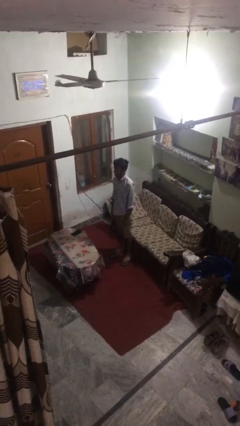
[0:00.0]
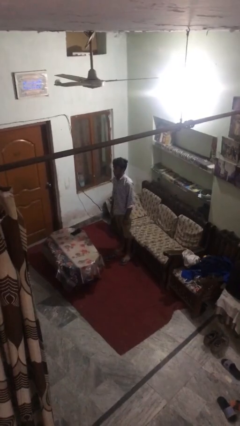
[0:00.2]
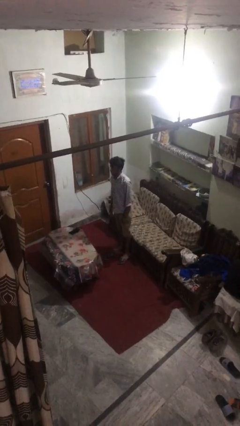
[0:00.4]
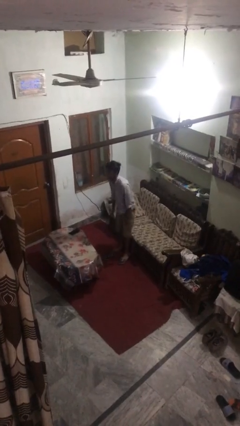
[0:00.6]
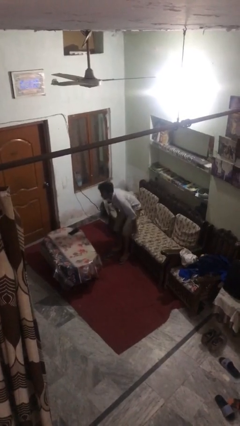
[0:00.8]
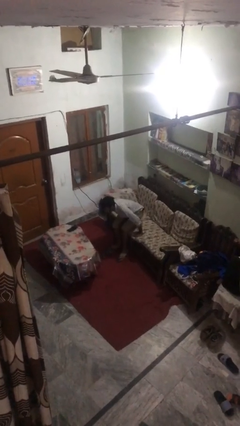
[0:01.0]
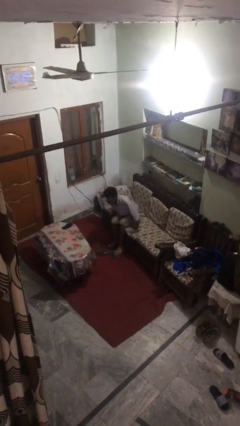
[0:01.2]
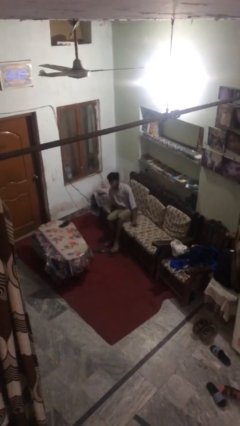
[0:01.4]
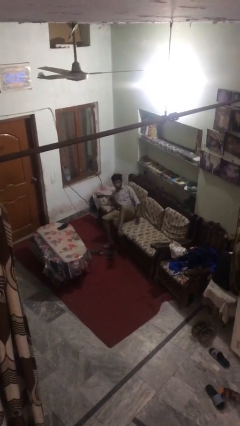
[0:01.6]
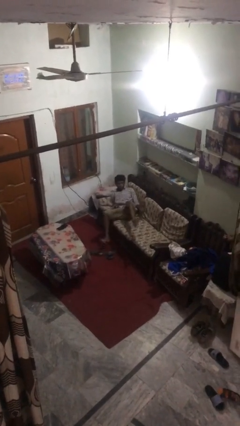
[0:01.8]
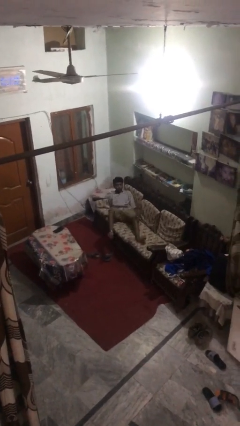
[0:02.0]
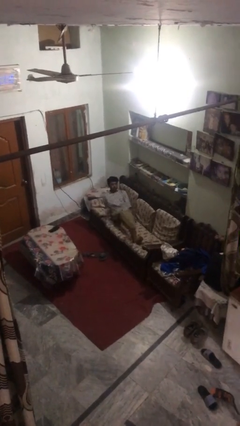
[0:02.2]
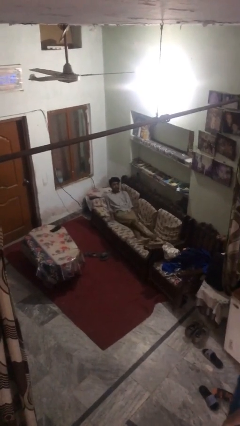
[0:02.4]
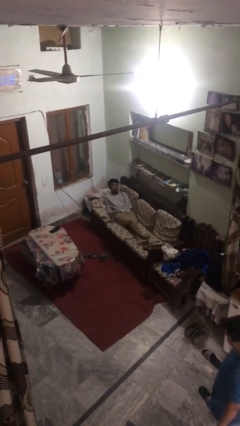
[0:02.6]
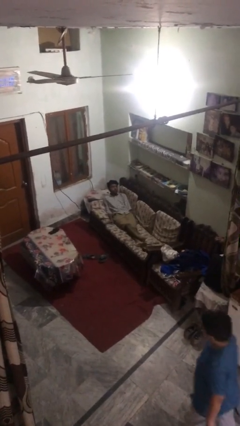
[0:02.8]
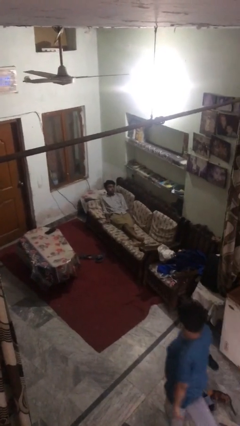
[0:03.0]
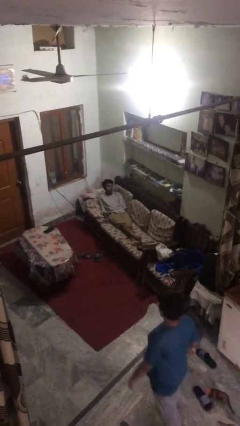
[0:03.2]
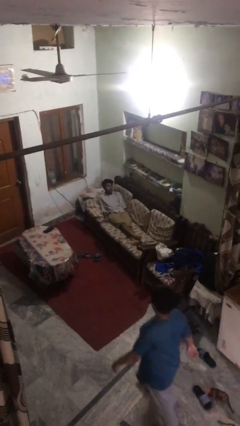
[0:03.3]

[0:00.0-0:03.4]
person lies down on couch

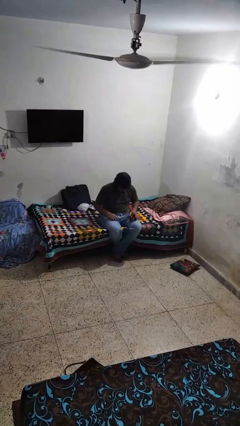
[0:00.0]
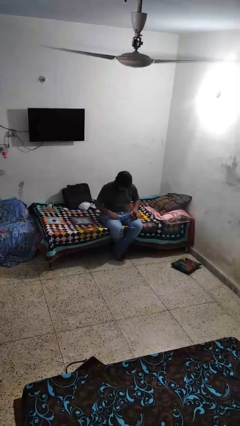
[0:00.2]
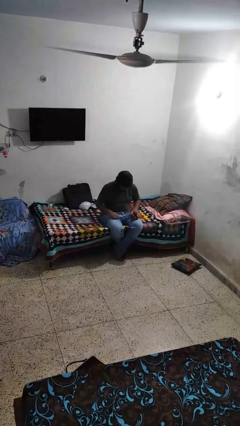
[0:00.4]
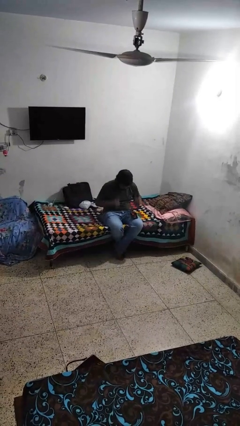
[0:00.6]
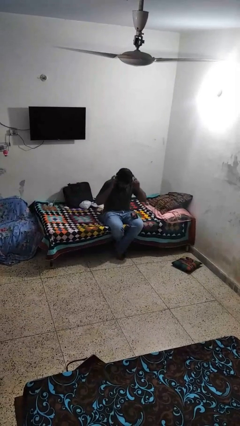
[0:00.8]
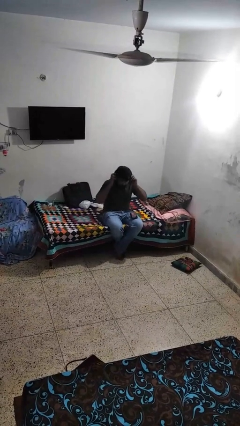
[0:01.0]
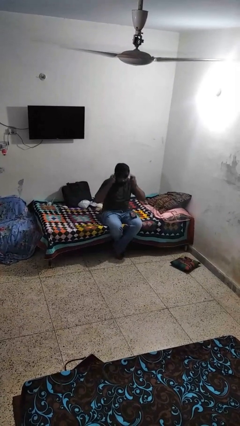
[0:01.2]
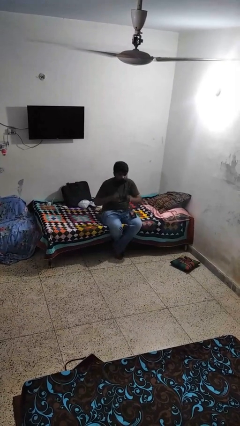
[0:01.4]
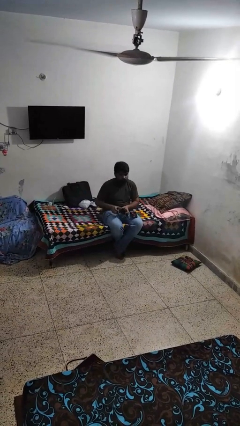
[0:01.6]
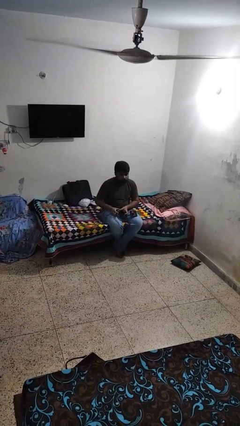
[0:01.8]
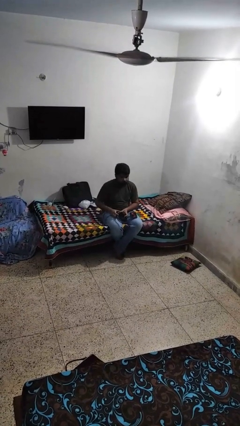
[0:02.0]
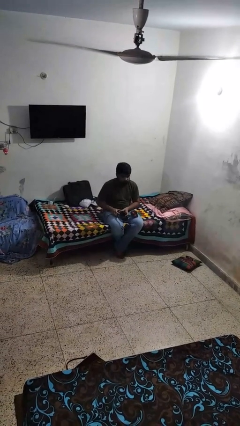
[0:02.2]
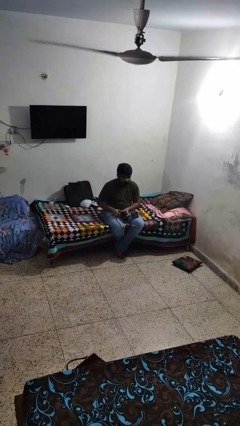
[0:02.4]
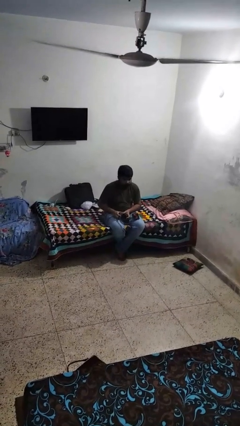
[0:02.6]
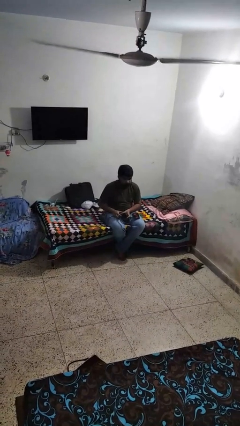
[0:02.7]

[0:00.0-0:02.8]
person takes off headphones

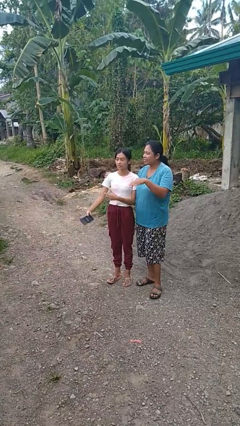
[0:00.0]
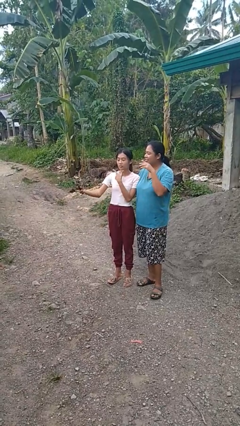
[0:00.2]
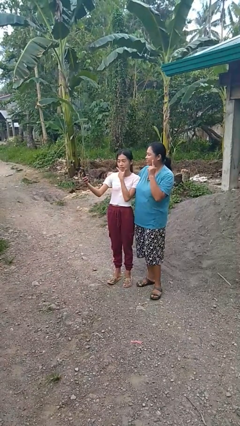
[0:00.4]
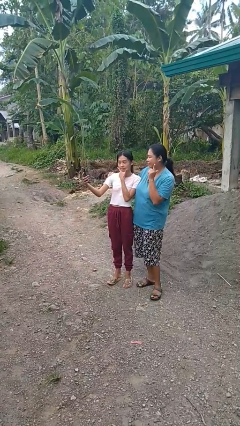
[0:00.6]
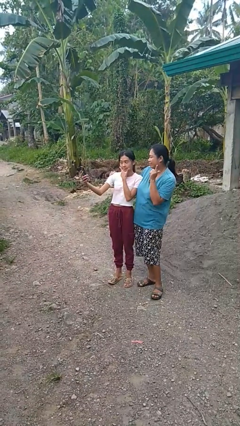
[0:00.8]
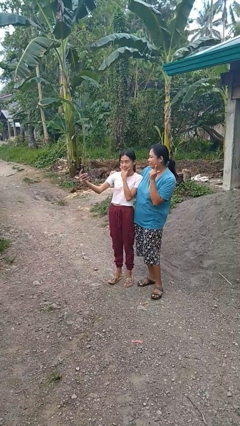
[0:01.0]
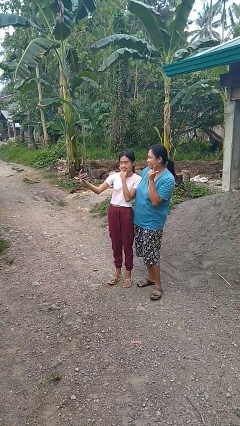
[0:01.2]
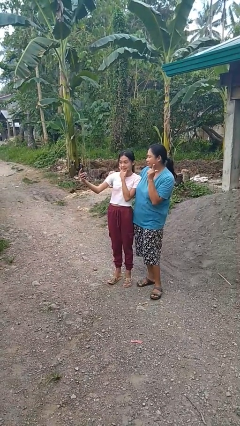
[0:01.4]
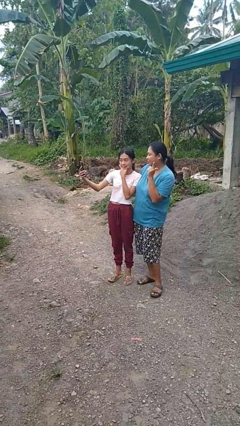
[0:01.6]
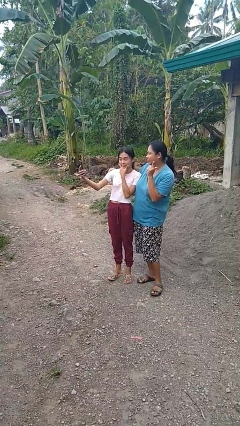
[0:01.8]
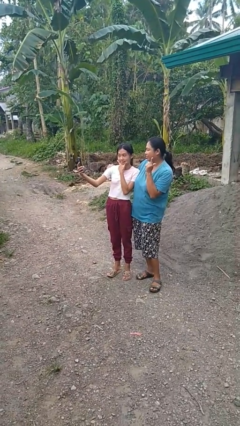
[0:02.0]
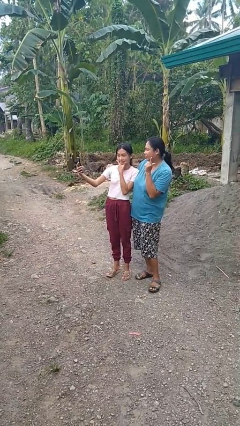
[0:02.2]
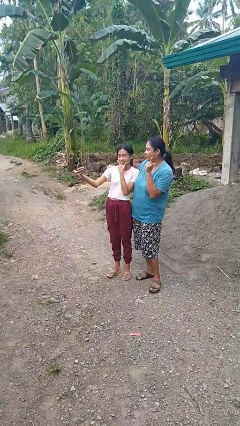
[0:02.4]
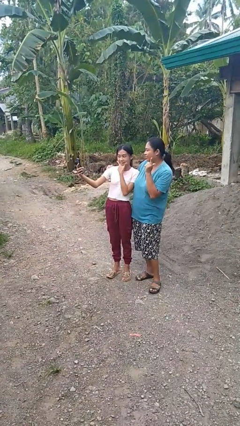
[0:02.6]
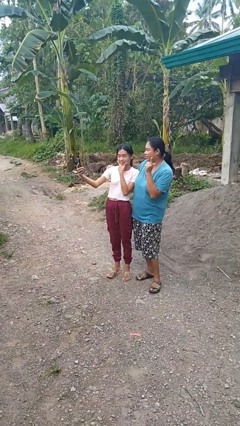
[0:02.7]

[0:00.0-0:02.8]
person takes selfie with person

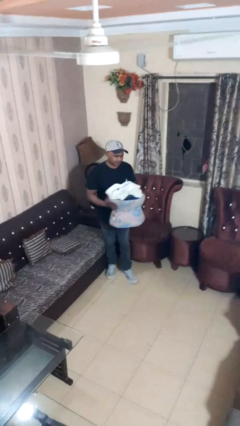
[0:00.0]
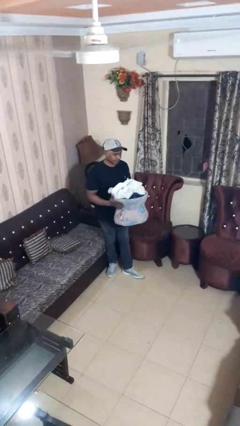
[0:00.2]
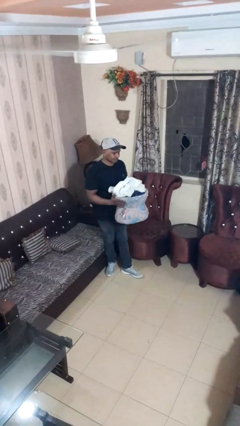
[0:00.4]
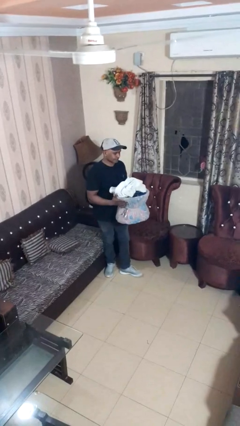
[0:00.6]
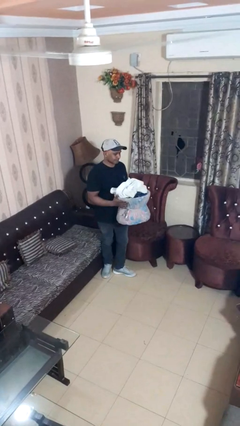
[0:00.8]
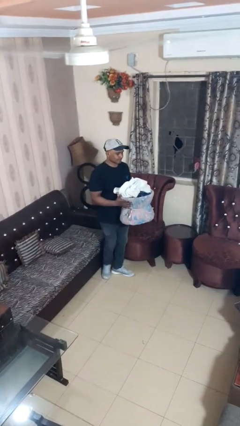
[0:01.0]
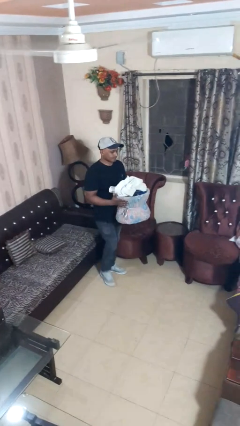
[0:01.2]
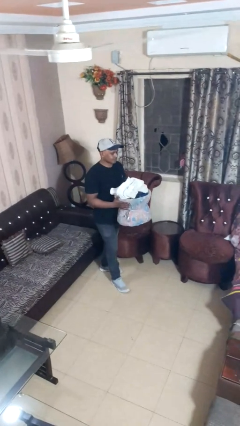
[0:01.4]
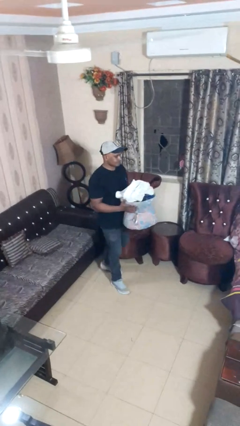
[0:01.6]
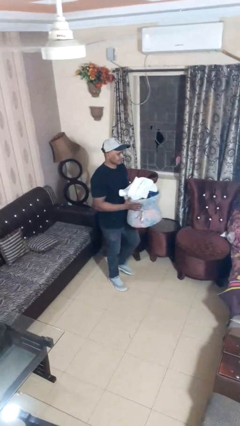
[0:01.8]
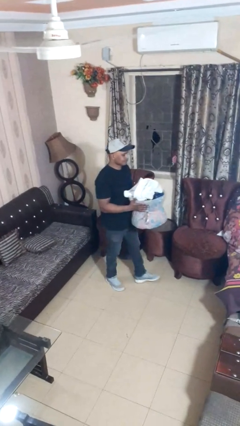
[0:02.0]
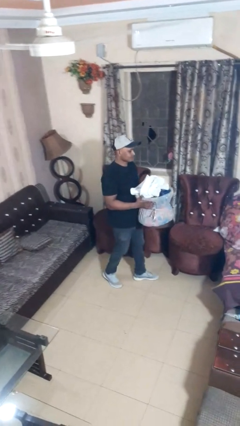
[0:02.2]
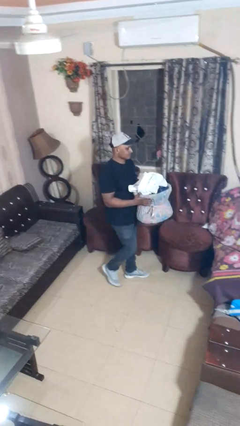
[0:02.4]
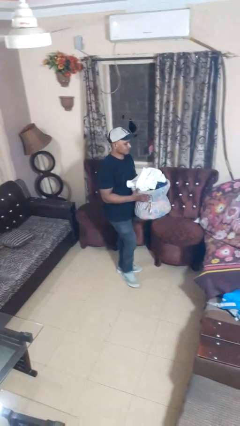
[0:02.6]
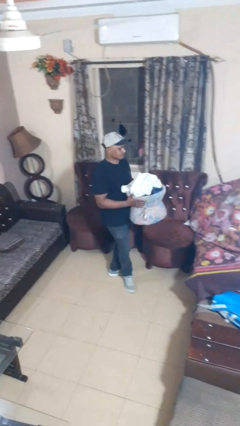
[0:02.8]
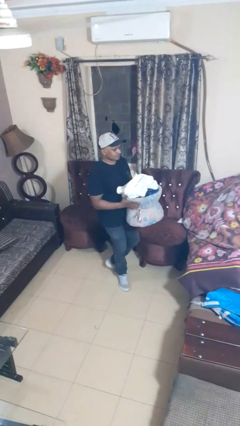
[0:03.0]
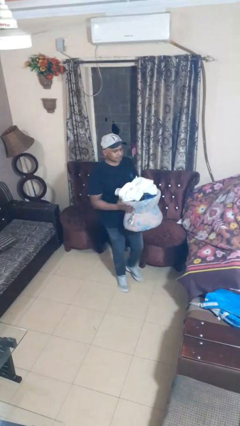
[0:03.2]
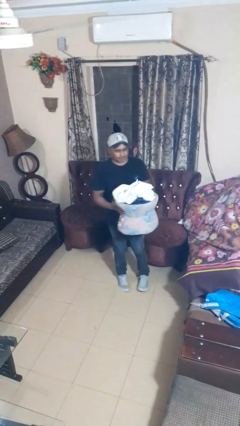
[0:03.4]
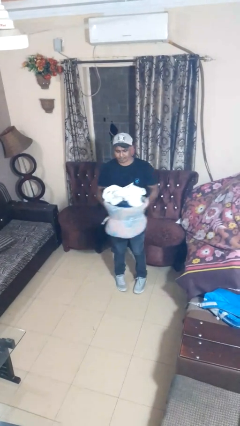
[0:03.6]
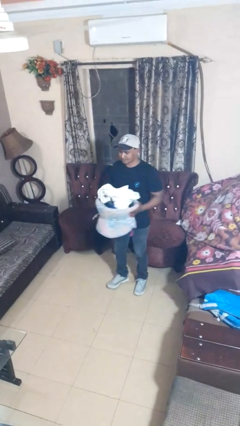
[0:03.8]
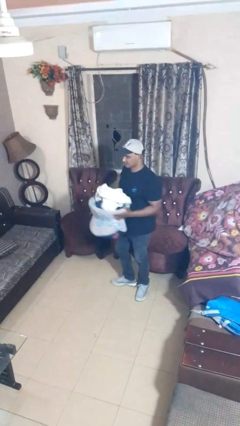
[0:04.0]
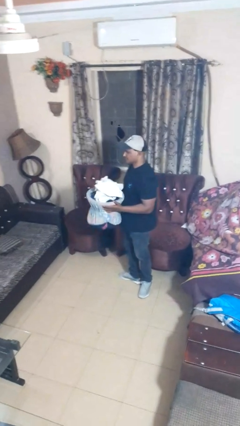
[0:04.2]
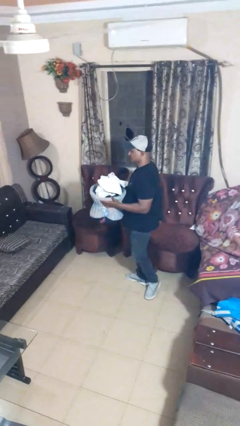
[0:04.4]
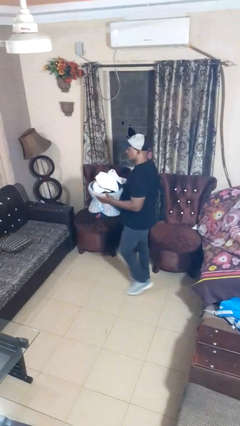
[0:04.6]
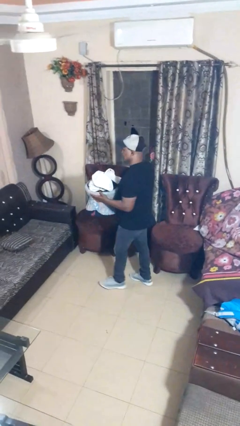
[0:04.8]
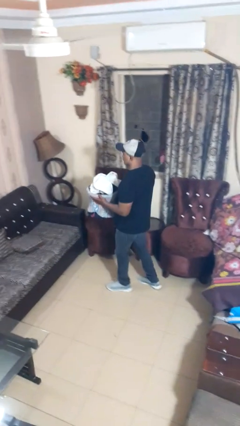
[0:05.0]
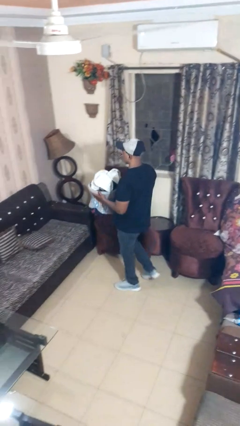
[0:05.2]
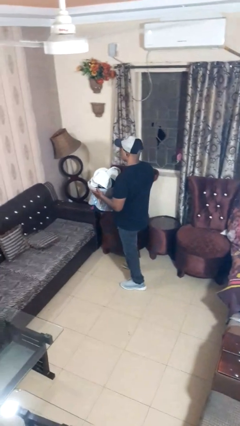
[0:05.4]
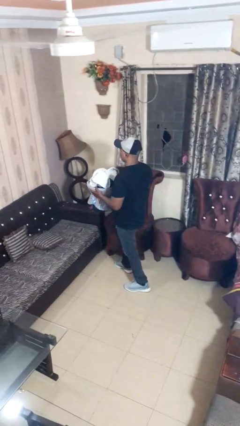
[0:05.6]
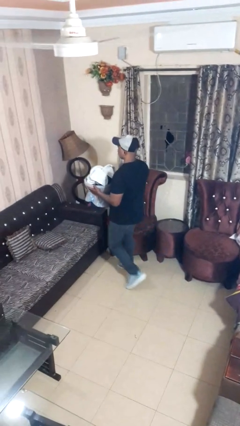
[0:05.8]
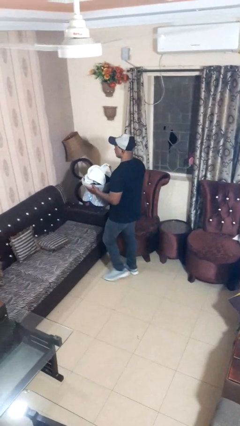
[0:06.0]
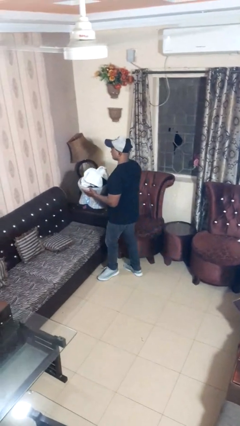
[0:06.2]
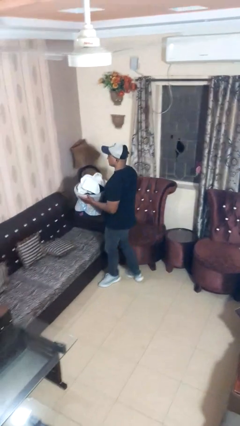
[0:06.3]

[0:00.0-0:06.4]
person carries laundry basket

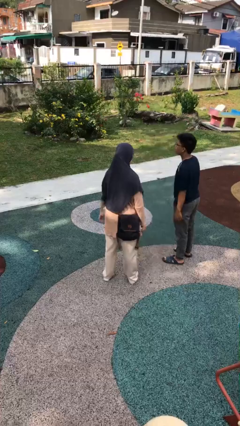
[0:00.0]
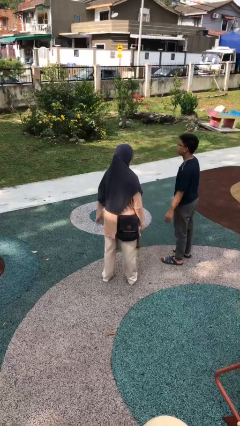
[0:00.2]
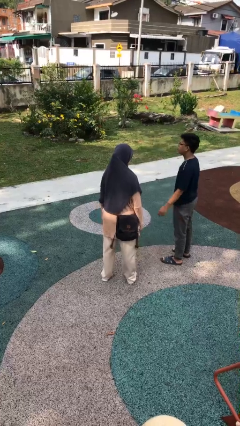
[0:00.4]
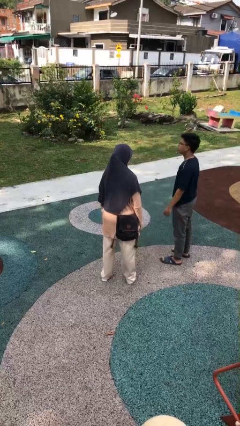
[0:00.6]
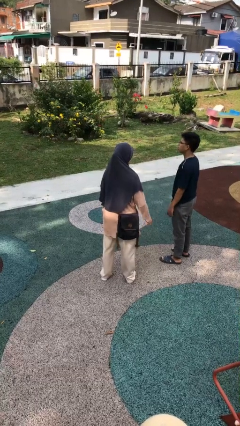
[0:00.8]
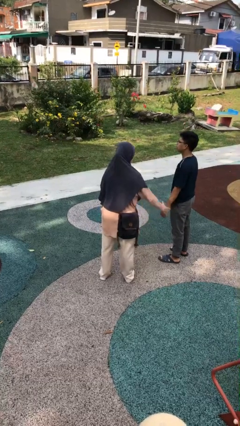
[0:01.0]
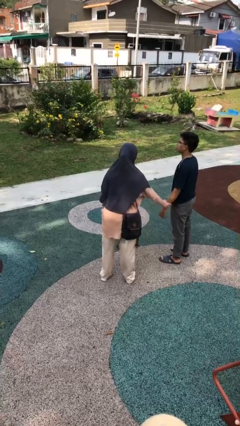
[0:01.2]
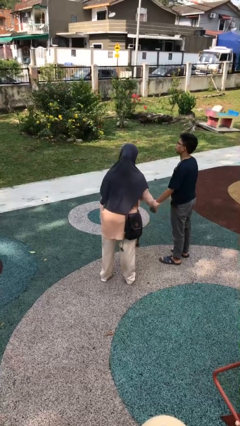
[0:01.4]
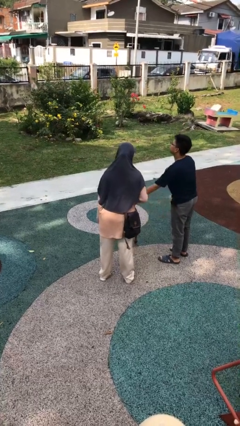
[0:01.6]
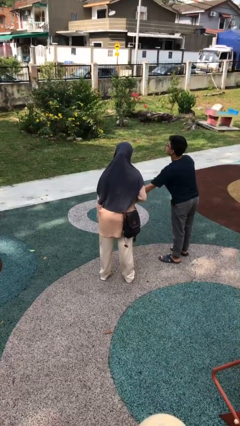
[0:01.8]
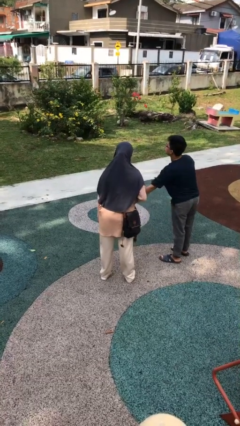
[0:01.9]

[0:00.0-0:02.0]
person grabs person by forearm

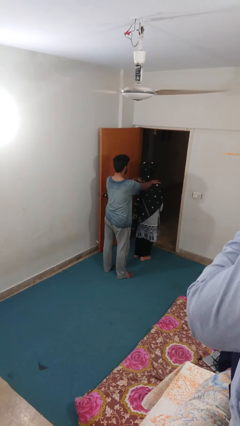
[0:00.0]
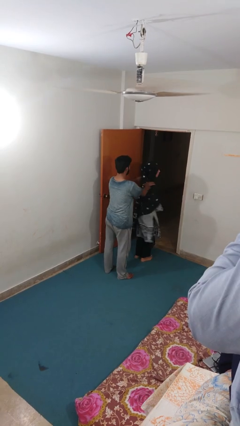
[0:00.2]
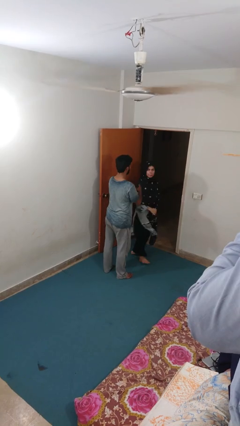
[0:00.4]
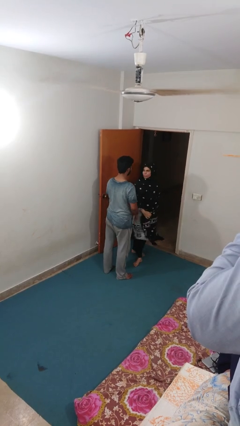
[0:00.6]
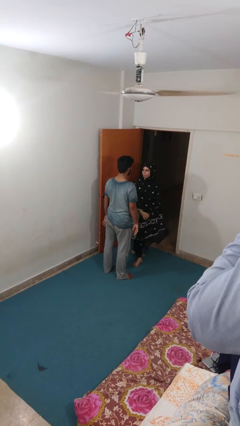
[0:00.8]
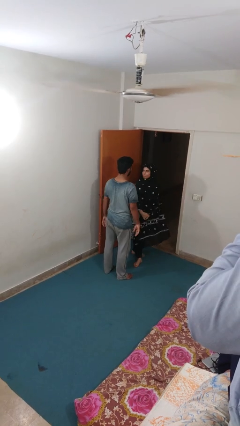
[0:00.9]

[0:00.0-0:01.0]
person spins person around
